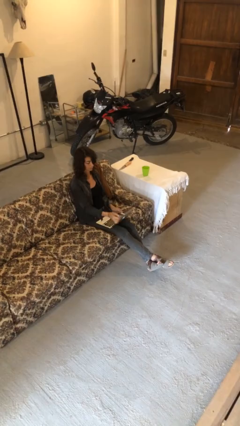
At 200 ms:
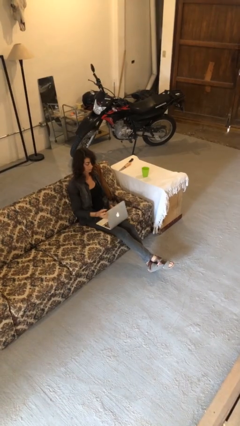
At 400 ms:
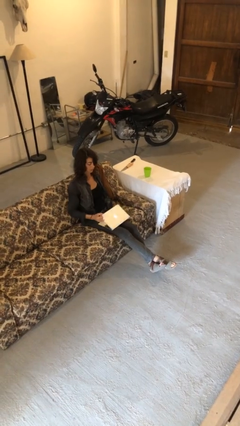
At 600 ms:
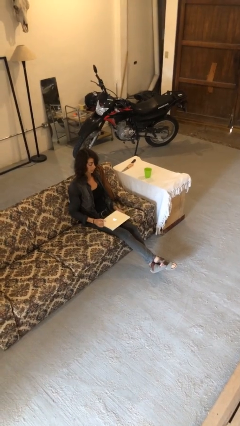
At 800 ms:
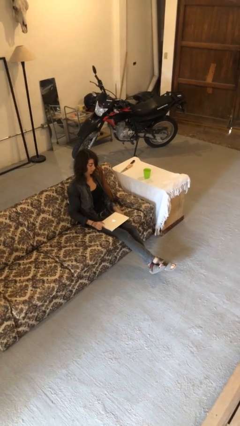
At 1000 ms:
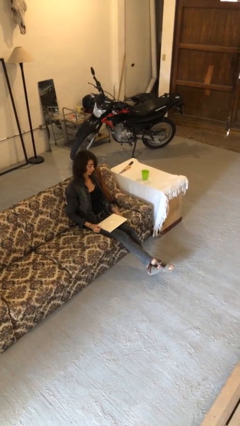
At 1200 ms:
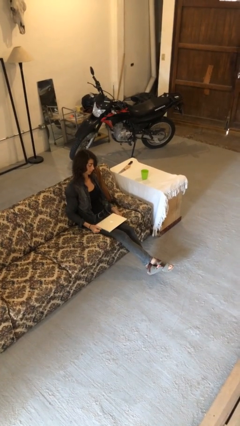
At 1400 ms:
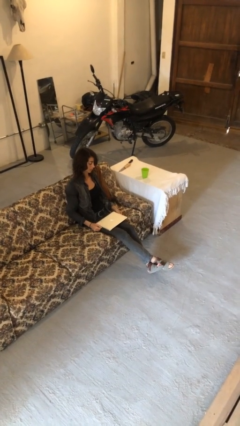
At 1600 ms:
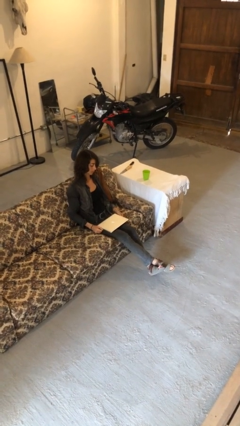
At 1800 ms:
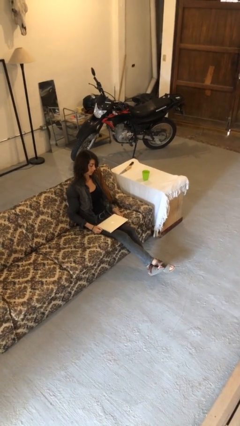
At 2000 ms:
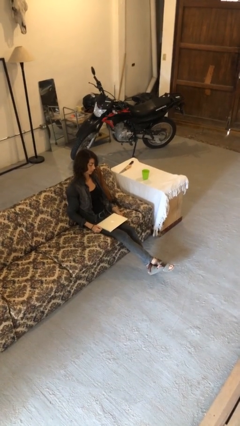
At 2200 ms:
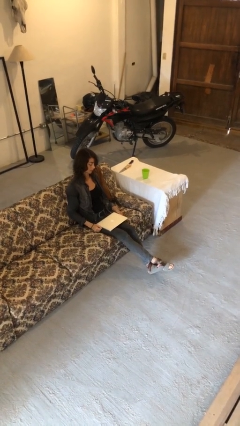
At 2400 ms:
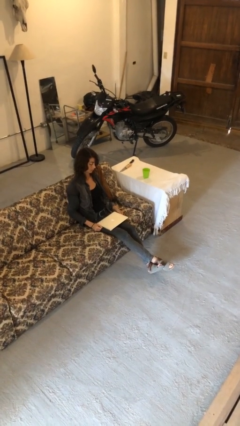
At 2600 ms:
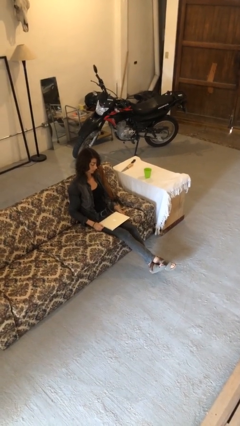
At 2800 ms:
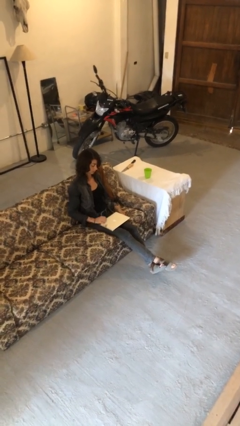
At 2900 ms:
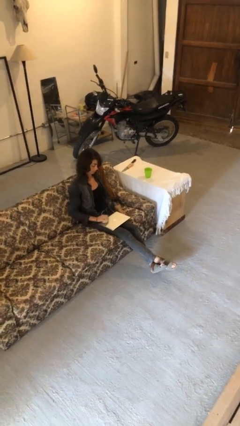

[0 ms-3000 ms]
person closes laptop

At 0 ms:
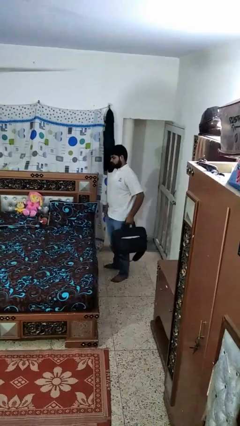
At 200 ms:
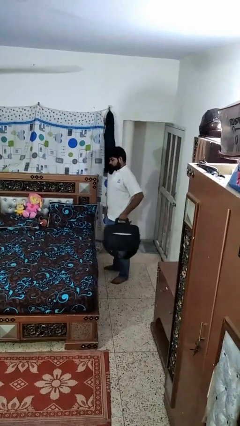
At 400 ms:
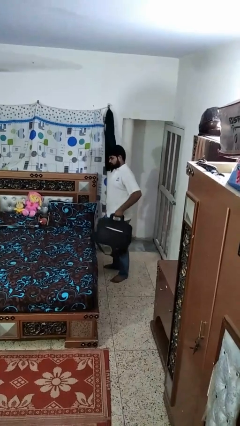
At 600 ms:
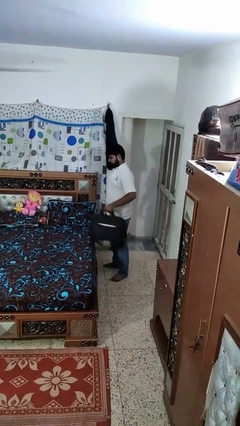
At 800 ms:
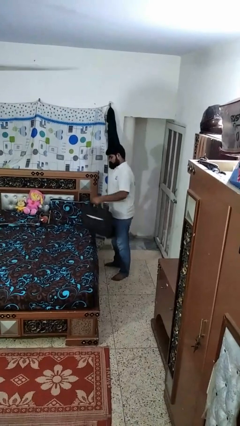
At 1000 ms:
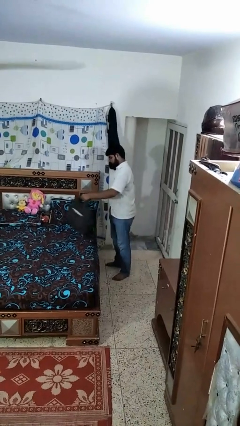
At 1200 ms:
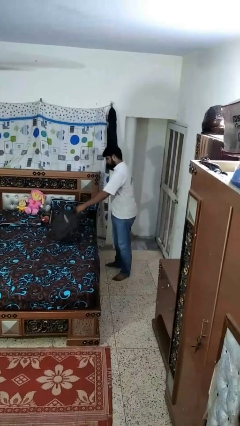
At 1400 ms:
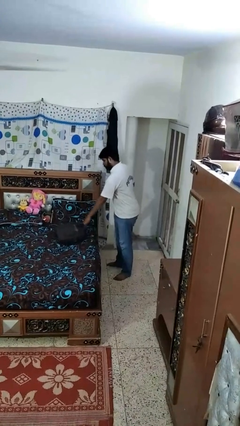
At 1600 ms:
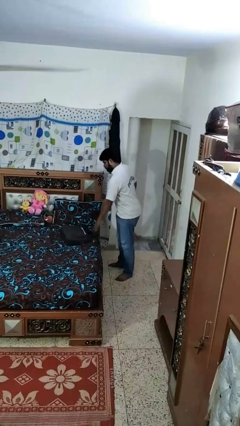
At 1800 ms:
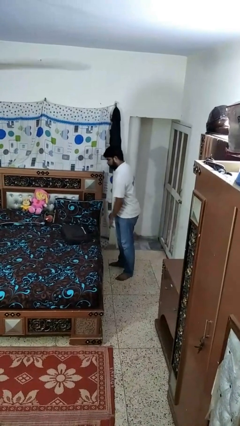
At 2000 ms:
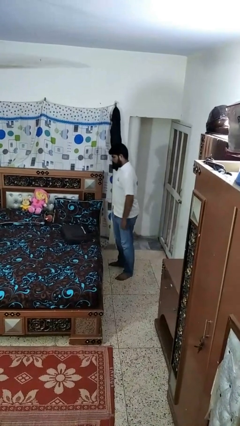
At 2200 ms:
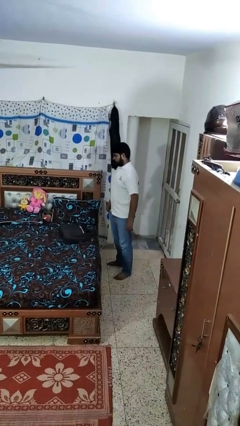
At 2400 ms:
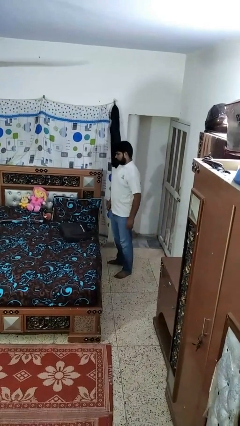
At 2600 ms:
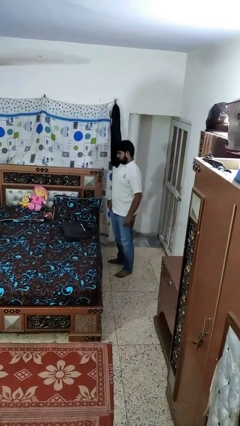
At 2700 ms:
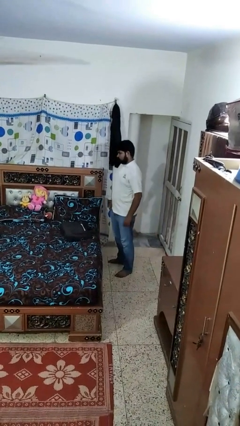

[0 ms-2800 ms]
person puts down object on bed

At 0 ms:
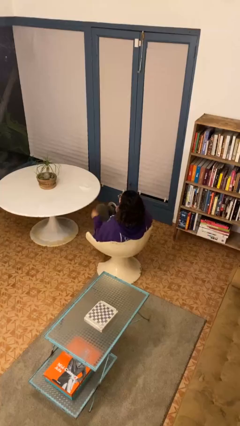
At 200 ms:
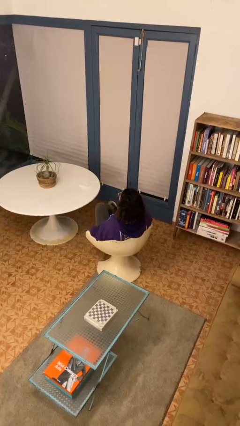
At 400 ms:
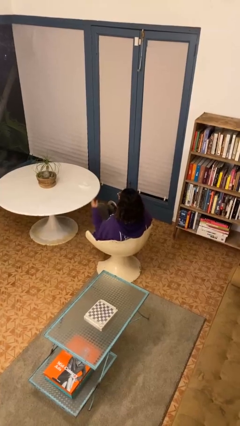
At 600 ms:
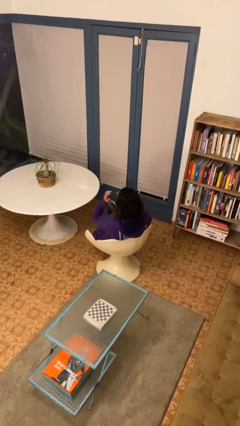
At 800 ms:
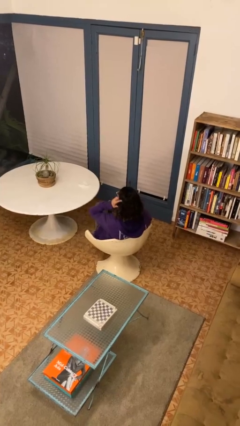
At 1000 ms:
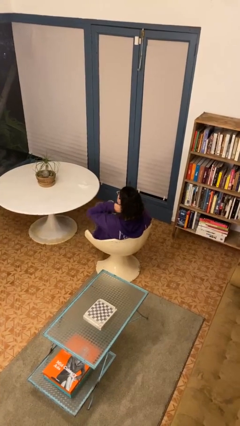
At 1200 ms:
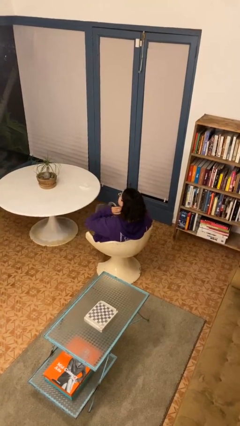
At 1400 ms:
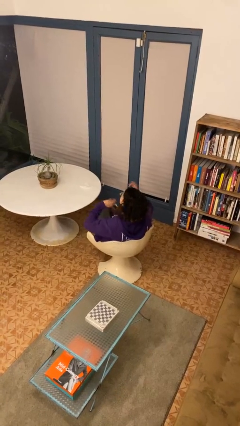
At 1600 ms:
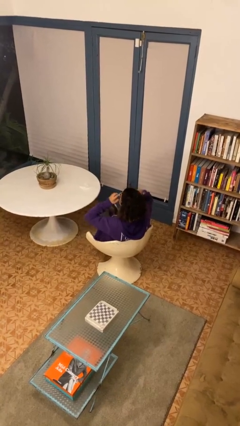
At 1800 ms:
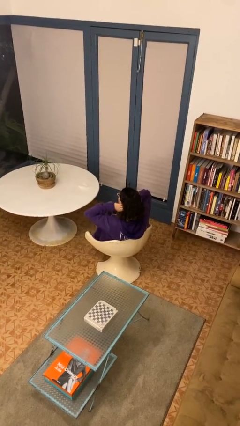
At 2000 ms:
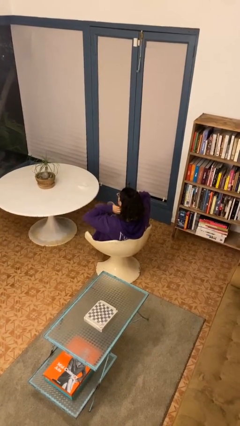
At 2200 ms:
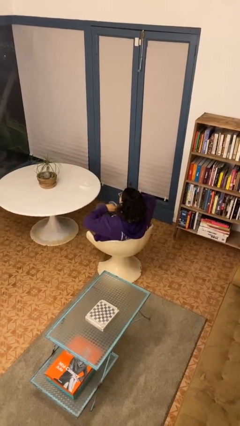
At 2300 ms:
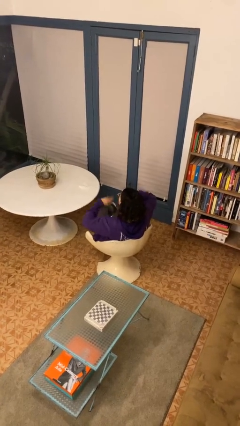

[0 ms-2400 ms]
person strokes hair

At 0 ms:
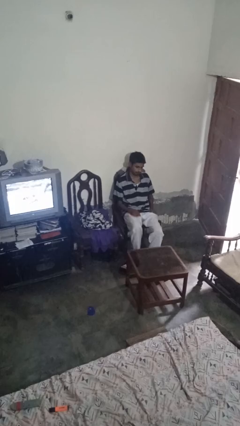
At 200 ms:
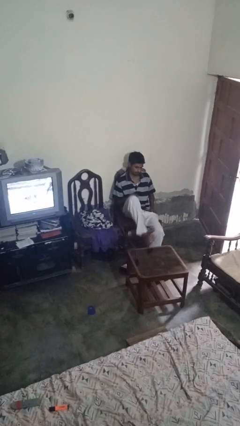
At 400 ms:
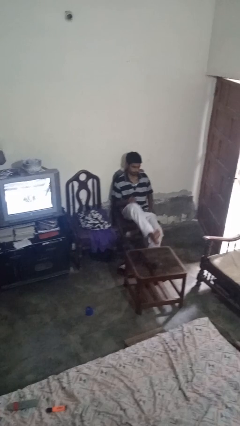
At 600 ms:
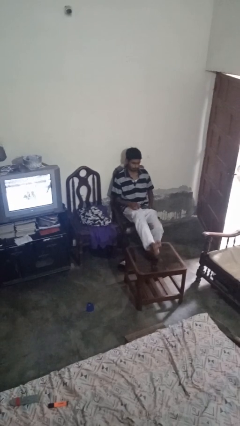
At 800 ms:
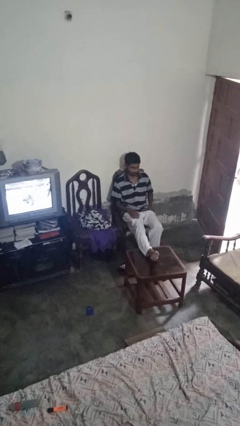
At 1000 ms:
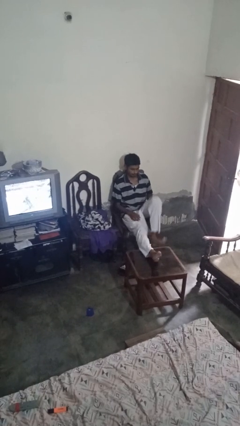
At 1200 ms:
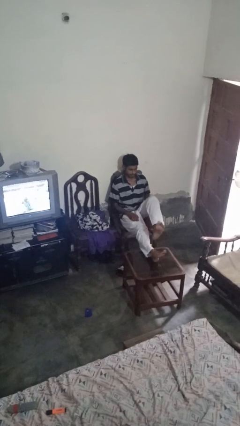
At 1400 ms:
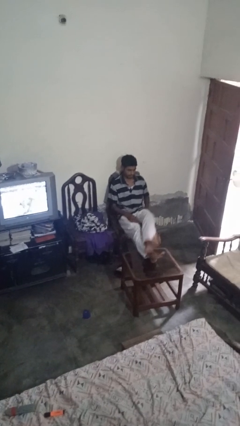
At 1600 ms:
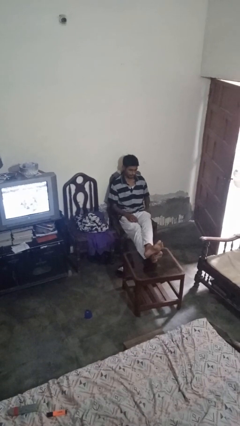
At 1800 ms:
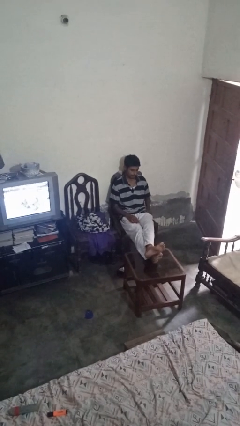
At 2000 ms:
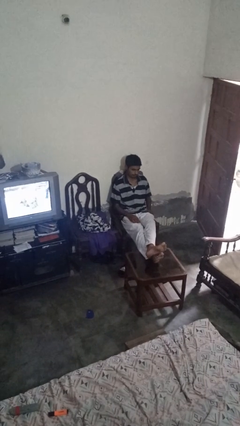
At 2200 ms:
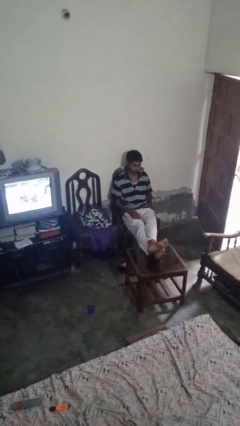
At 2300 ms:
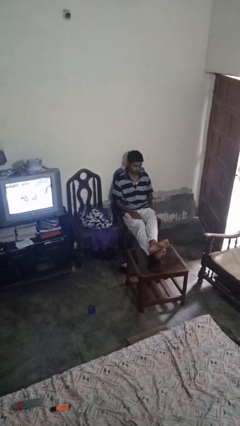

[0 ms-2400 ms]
person puts feet up

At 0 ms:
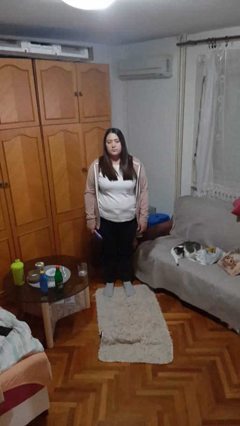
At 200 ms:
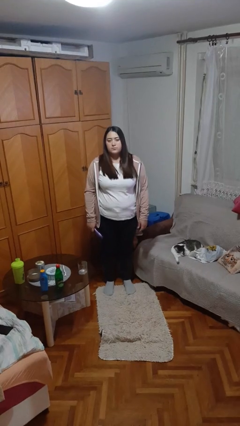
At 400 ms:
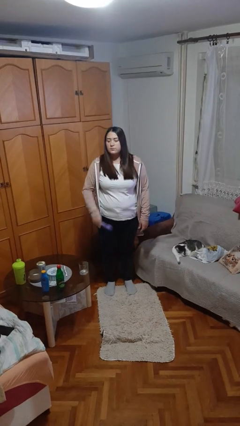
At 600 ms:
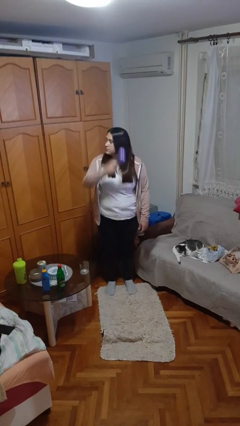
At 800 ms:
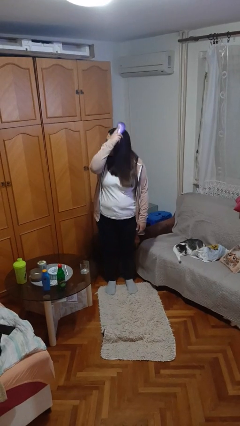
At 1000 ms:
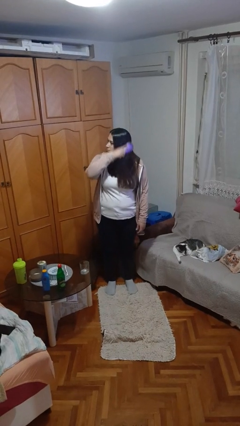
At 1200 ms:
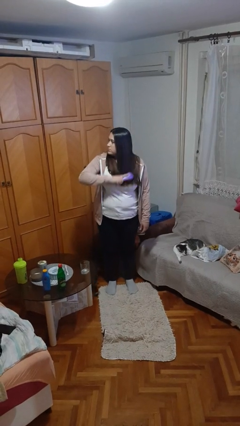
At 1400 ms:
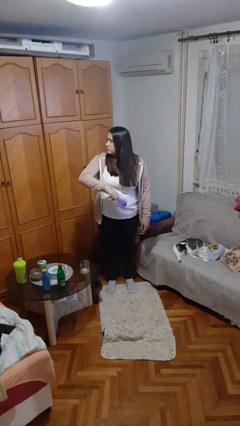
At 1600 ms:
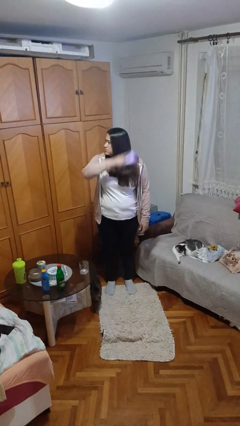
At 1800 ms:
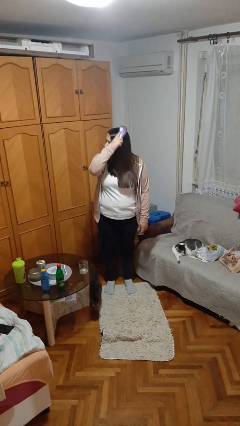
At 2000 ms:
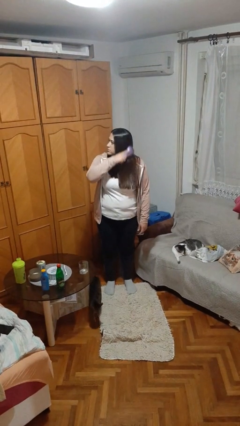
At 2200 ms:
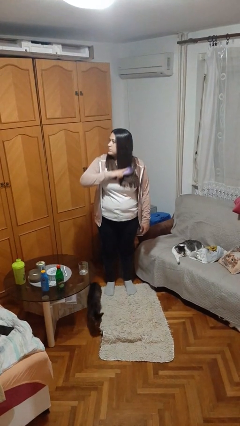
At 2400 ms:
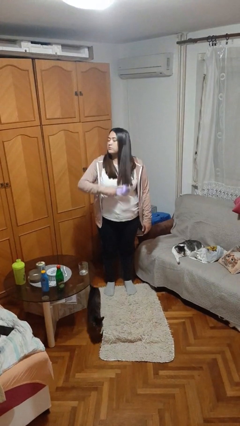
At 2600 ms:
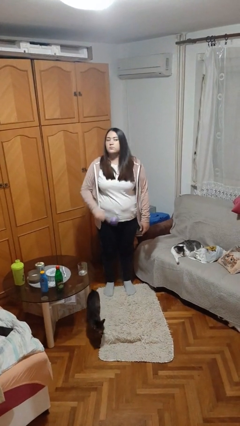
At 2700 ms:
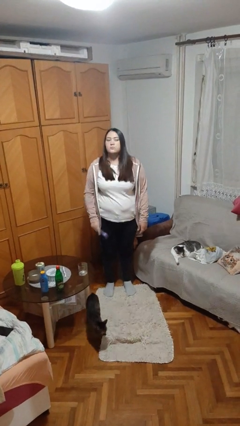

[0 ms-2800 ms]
person brushes hair

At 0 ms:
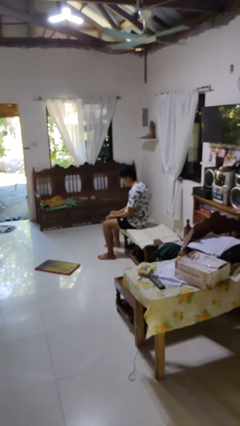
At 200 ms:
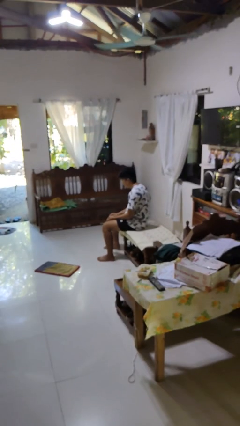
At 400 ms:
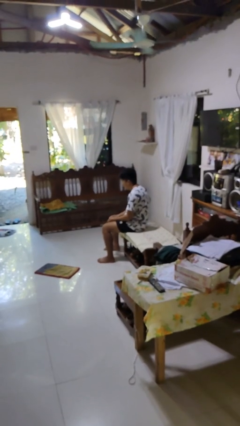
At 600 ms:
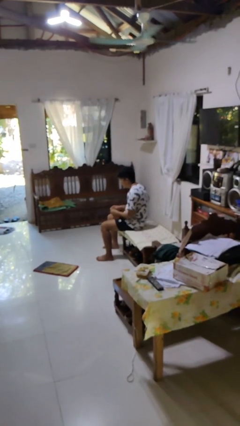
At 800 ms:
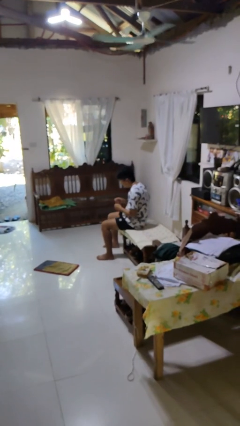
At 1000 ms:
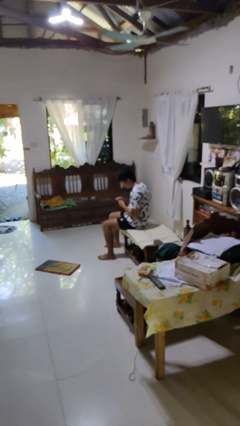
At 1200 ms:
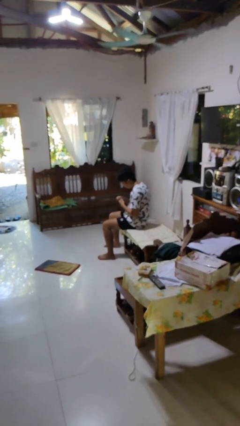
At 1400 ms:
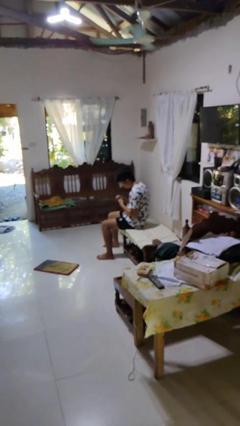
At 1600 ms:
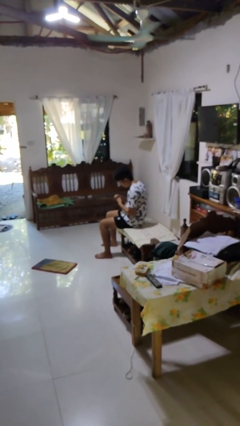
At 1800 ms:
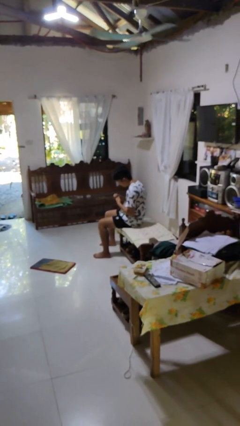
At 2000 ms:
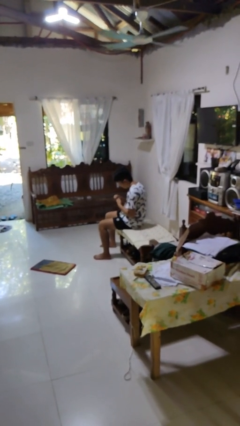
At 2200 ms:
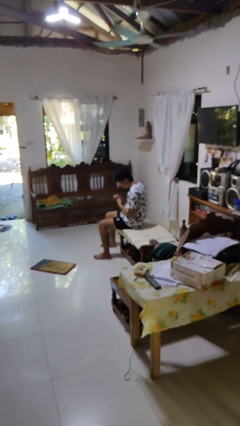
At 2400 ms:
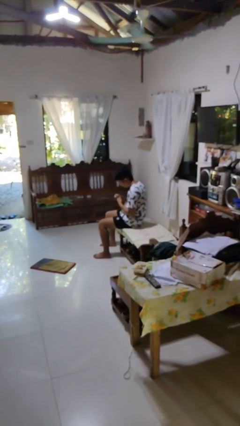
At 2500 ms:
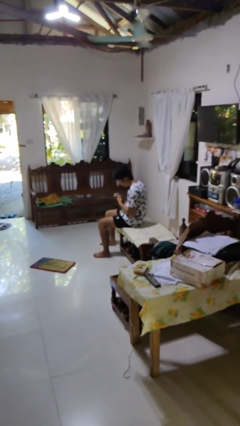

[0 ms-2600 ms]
person files fingernails

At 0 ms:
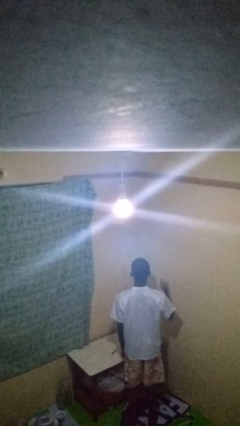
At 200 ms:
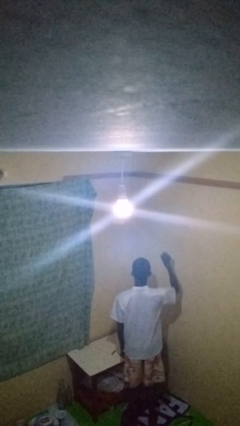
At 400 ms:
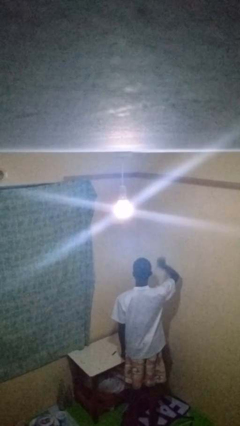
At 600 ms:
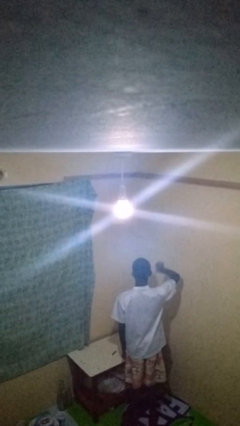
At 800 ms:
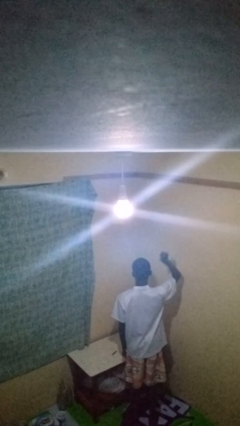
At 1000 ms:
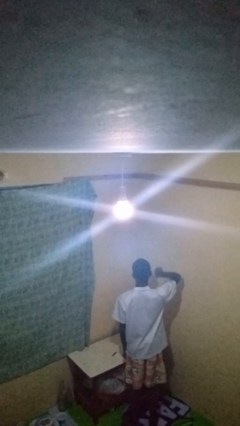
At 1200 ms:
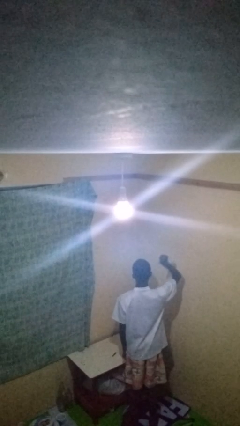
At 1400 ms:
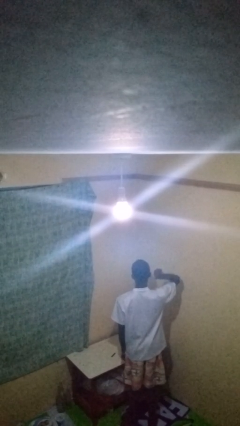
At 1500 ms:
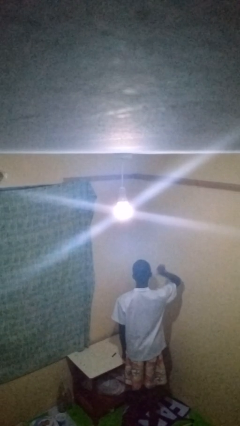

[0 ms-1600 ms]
person gestures behind me
